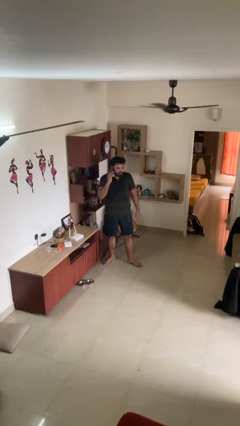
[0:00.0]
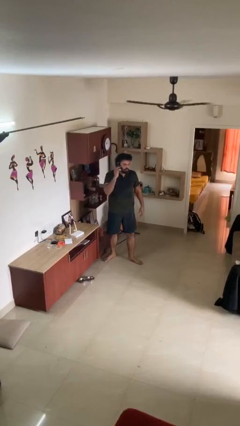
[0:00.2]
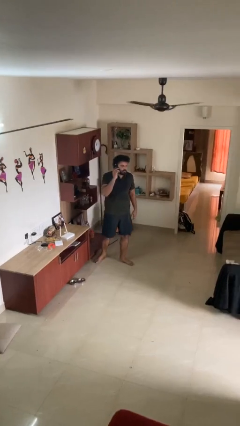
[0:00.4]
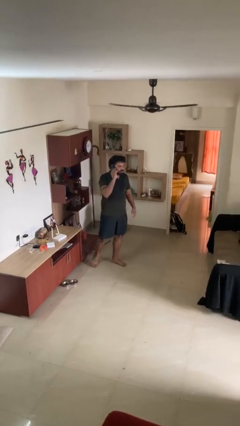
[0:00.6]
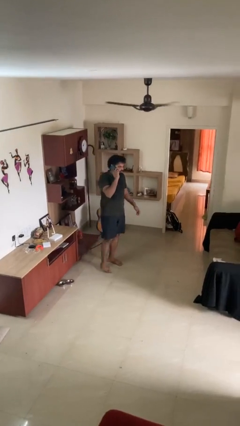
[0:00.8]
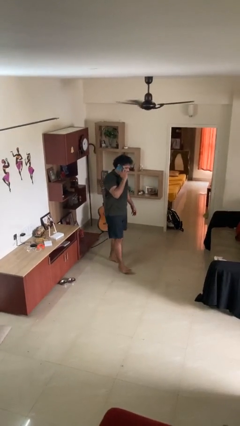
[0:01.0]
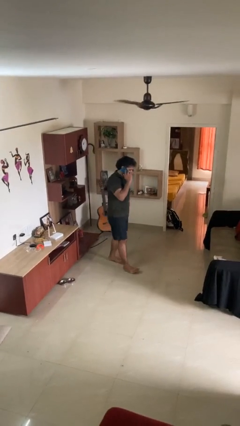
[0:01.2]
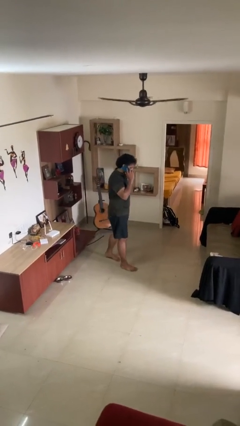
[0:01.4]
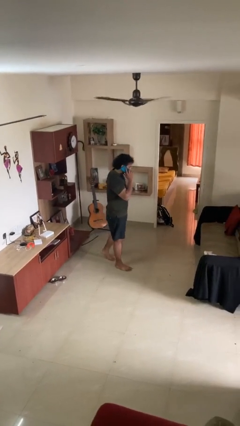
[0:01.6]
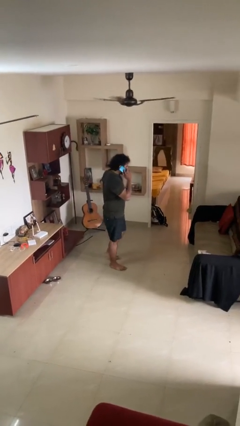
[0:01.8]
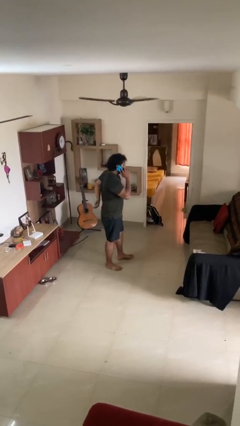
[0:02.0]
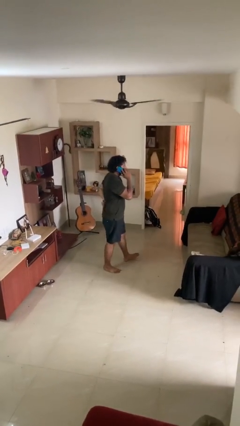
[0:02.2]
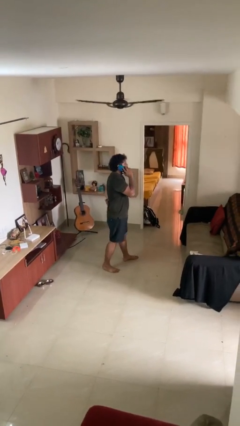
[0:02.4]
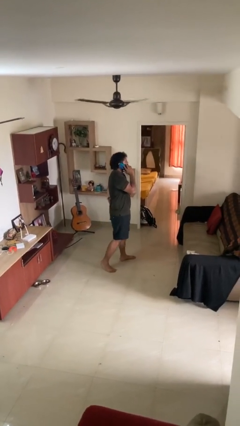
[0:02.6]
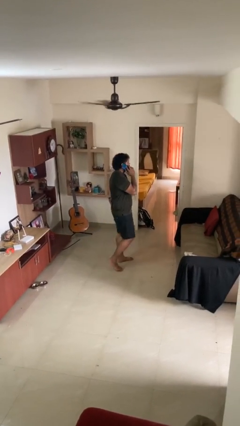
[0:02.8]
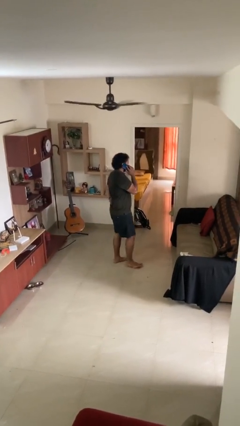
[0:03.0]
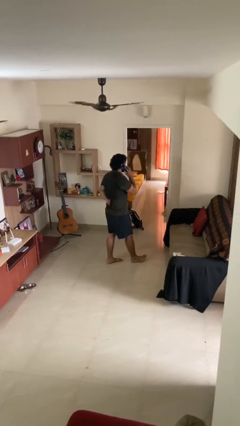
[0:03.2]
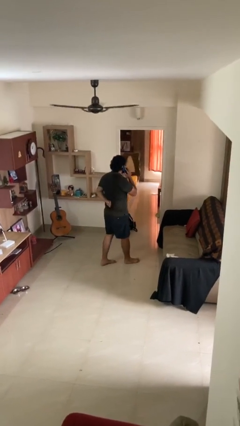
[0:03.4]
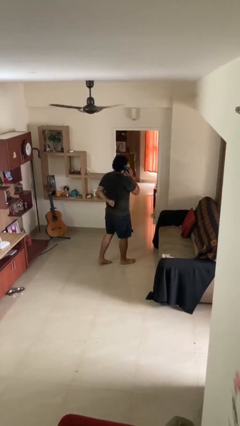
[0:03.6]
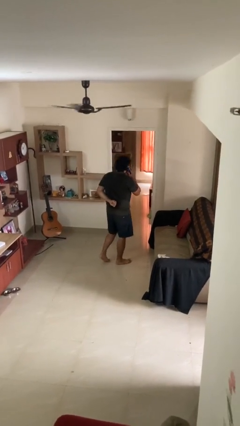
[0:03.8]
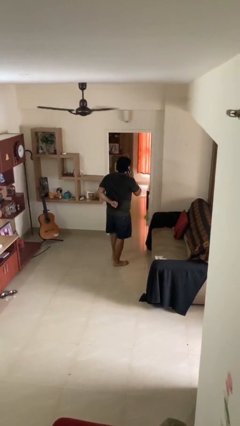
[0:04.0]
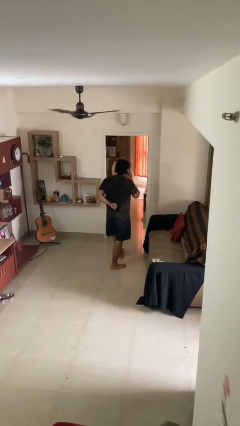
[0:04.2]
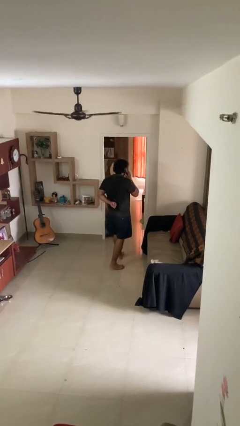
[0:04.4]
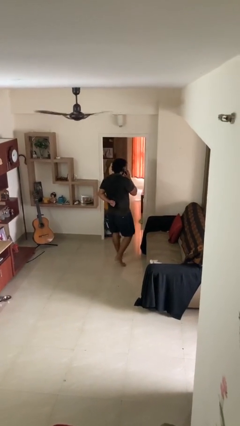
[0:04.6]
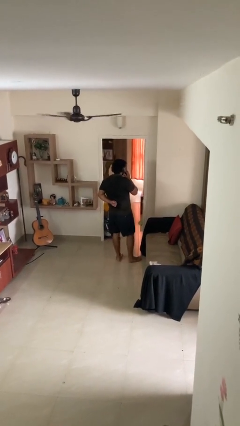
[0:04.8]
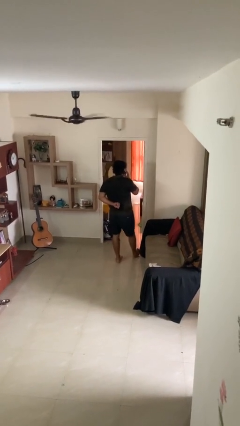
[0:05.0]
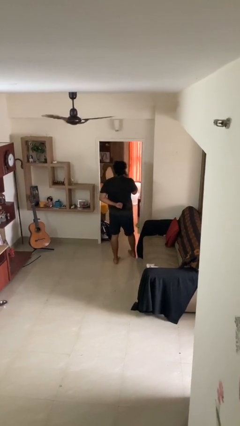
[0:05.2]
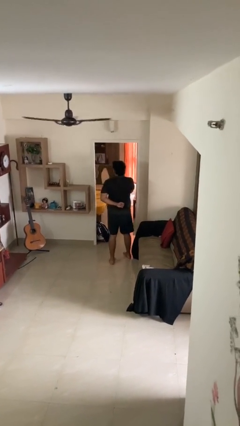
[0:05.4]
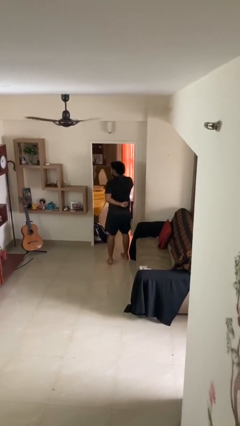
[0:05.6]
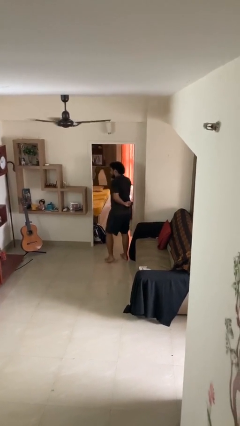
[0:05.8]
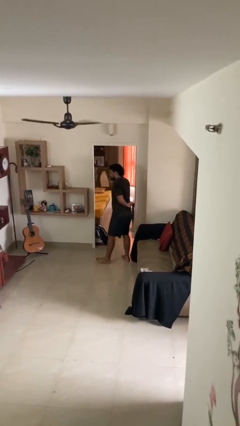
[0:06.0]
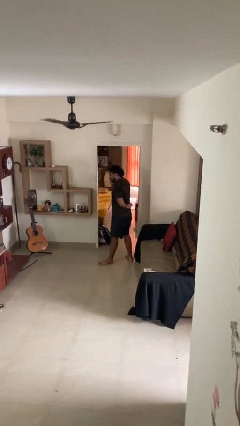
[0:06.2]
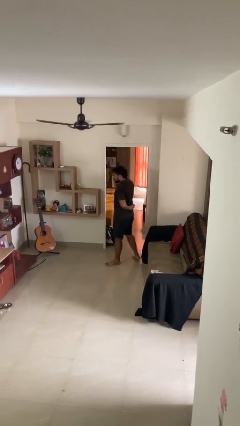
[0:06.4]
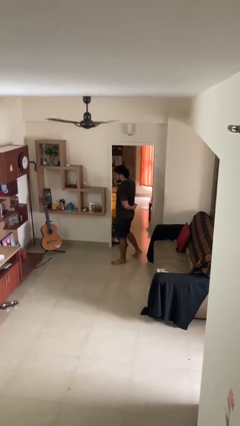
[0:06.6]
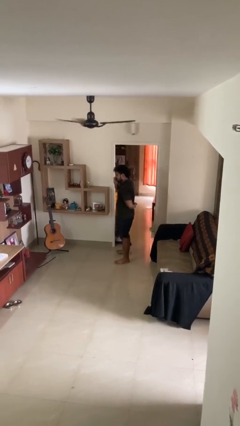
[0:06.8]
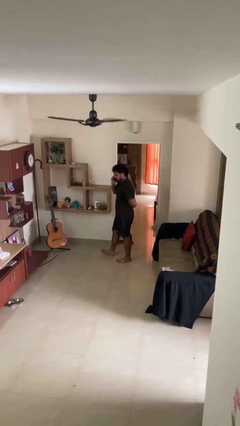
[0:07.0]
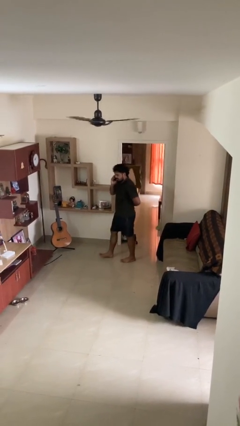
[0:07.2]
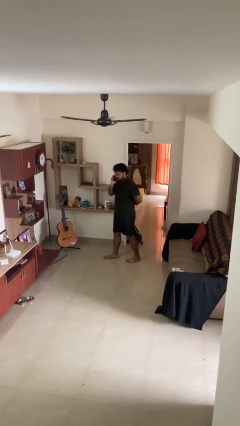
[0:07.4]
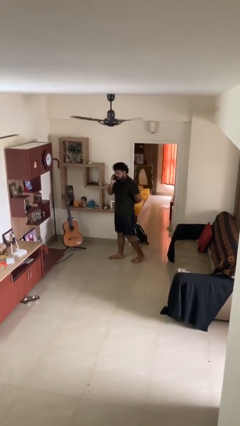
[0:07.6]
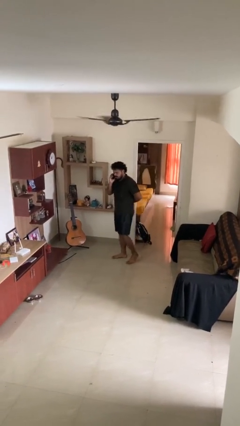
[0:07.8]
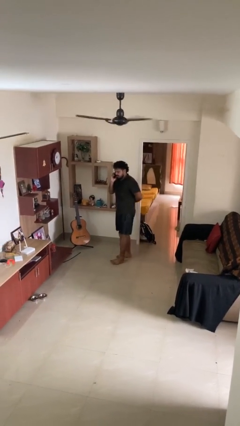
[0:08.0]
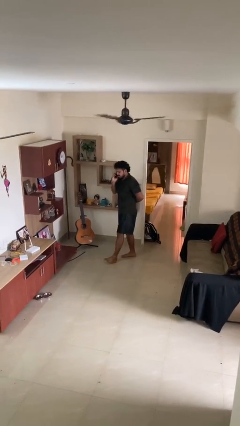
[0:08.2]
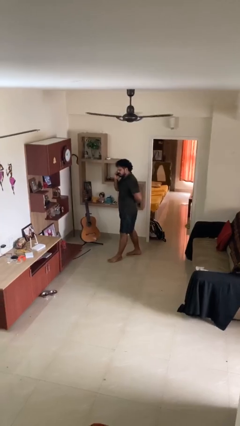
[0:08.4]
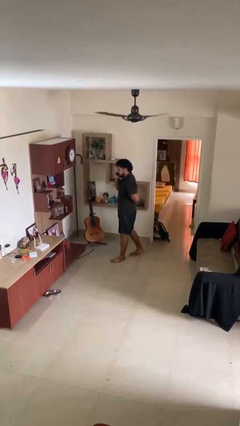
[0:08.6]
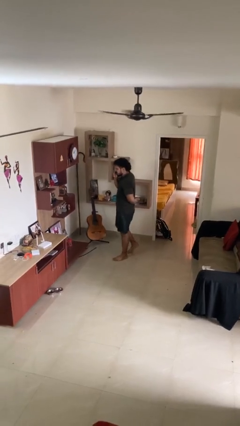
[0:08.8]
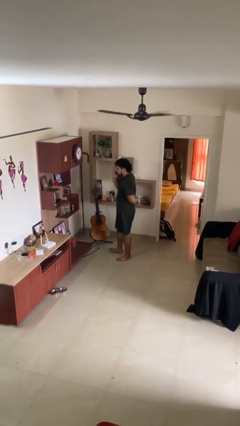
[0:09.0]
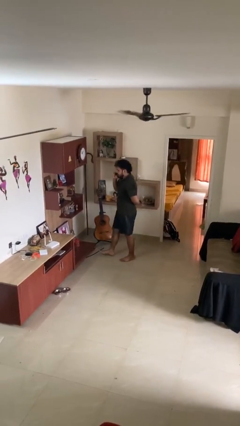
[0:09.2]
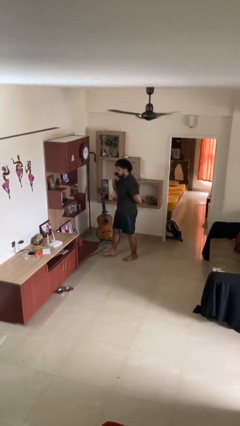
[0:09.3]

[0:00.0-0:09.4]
person talks on phone

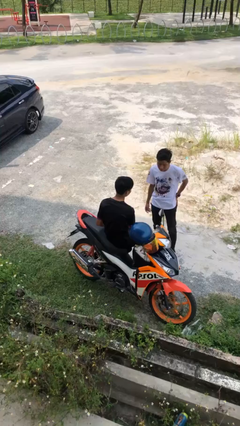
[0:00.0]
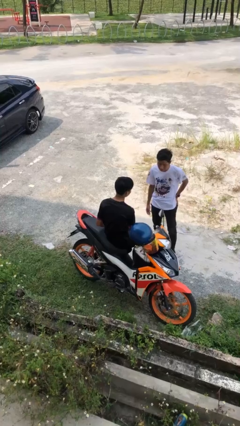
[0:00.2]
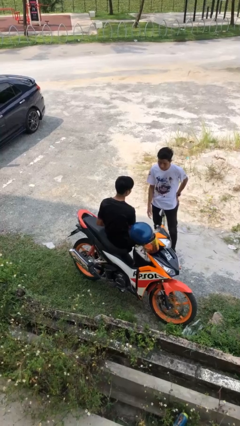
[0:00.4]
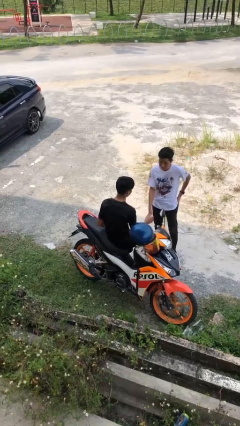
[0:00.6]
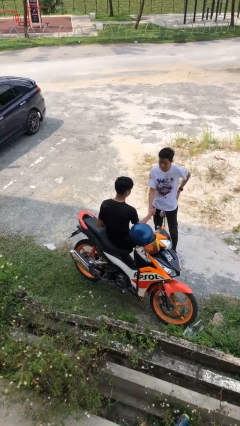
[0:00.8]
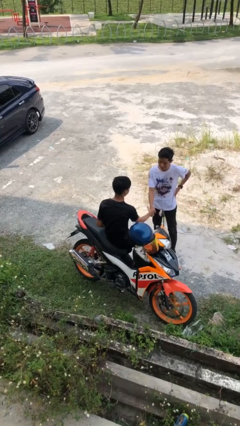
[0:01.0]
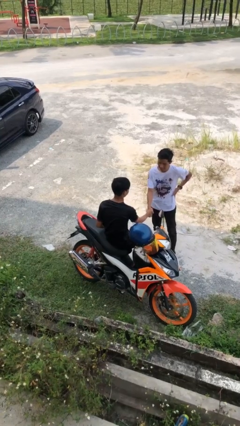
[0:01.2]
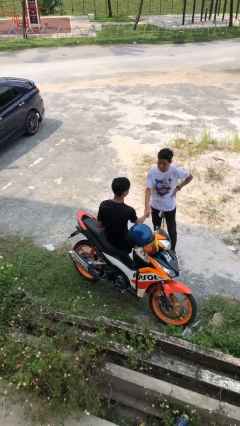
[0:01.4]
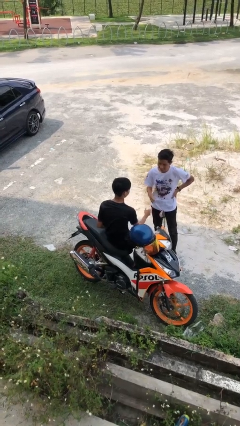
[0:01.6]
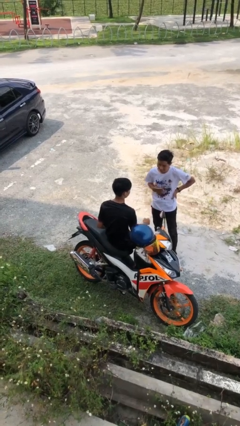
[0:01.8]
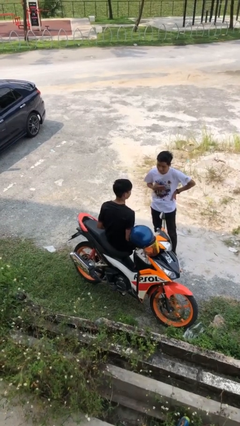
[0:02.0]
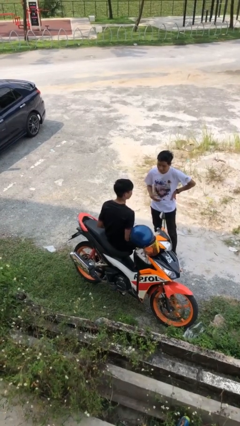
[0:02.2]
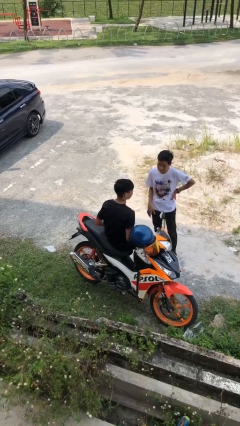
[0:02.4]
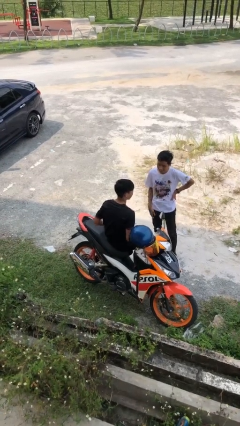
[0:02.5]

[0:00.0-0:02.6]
person shakes hand

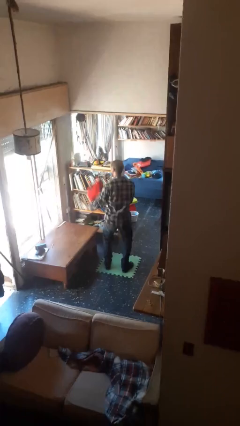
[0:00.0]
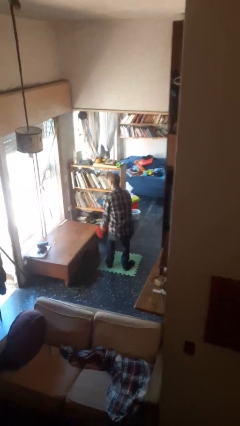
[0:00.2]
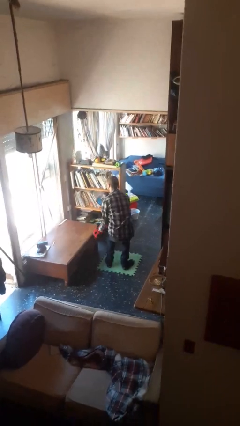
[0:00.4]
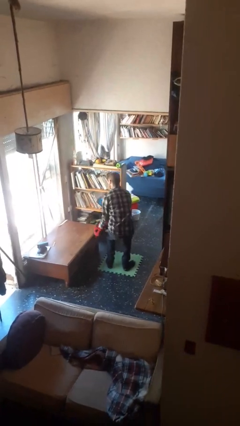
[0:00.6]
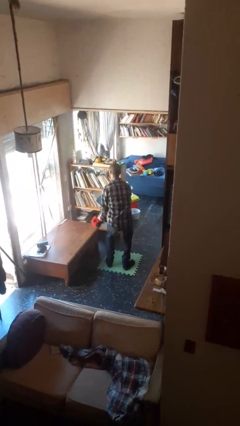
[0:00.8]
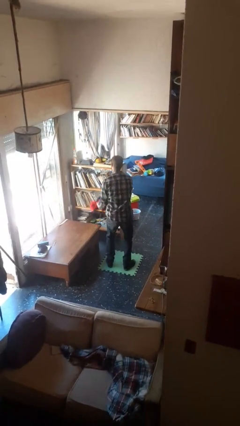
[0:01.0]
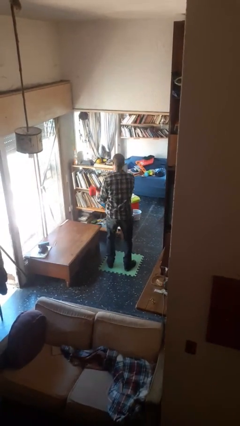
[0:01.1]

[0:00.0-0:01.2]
person catches dropped object

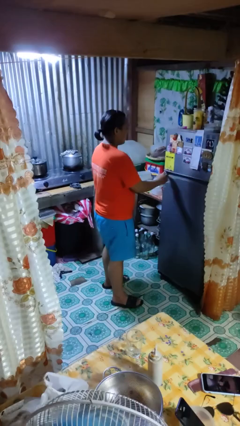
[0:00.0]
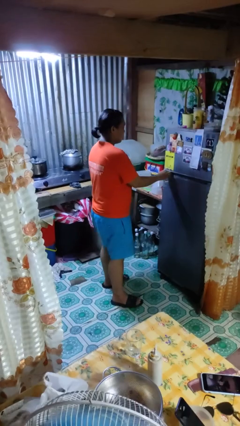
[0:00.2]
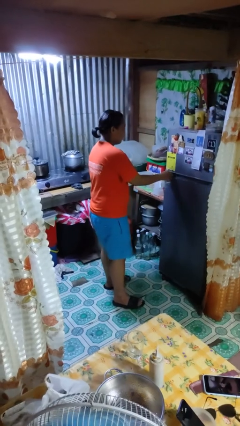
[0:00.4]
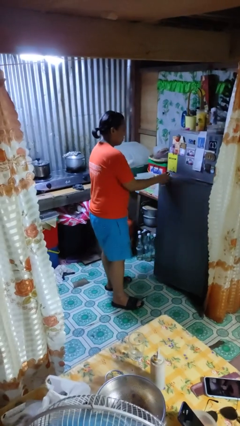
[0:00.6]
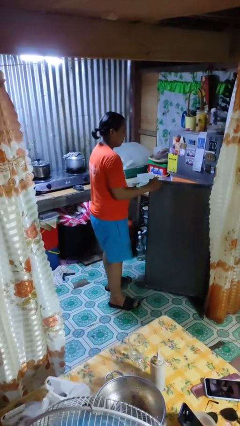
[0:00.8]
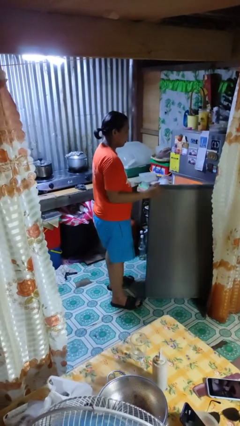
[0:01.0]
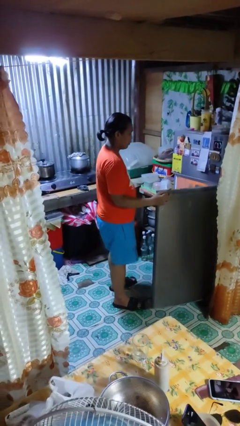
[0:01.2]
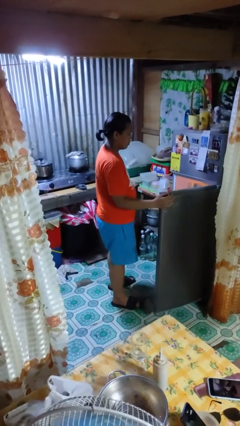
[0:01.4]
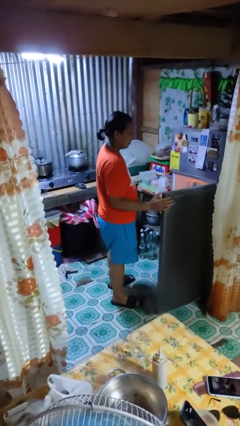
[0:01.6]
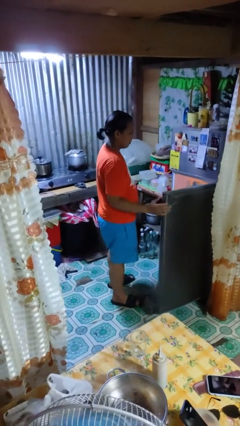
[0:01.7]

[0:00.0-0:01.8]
person opens refrigerator

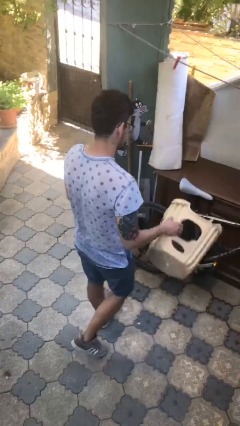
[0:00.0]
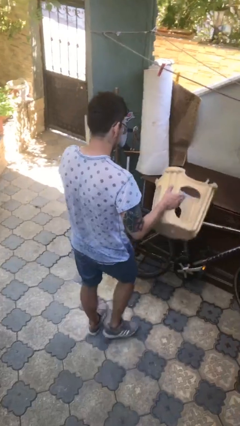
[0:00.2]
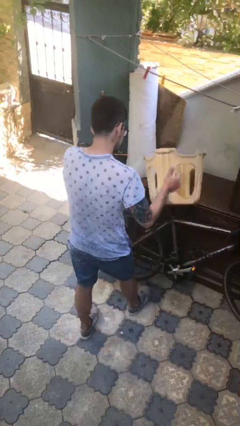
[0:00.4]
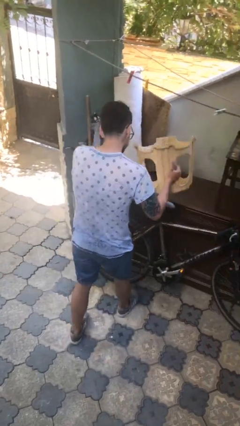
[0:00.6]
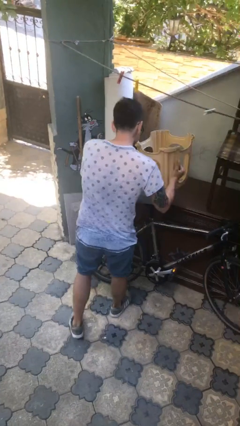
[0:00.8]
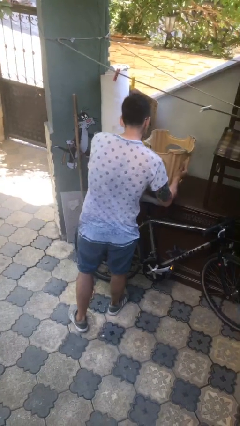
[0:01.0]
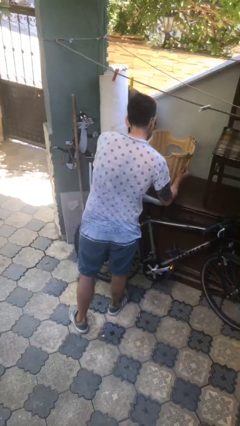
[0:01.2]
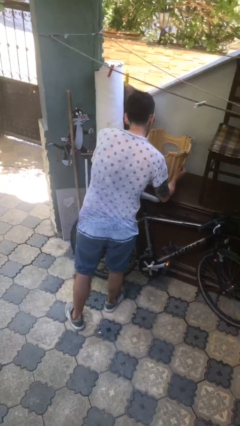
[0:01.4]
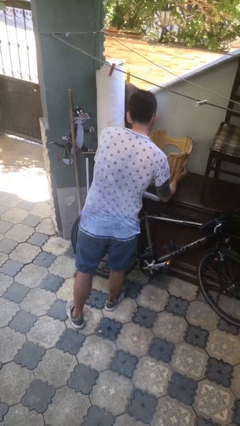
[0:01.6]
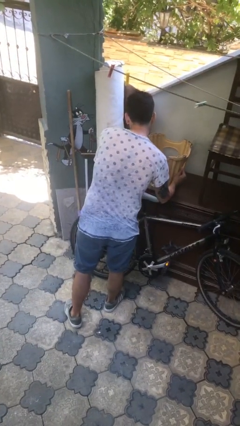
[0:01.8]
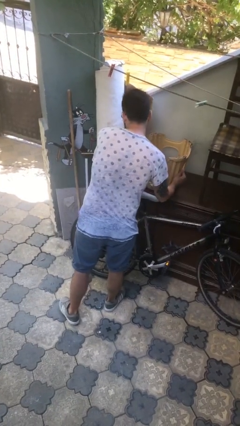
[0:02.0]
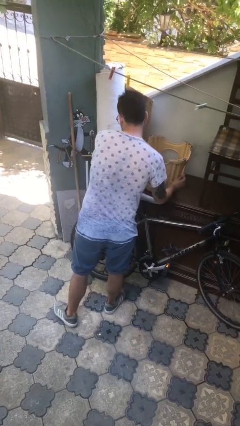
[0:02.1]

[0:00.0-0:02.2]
person puts down object on table

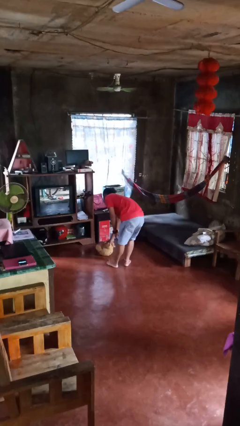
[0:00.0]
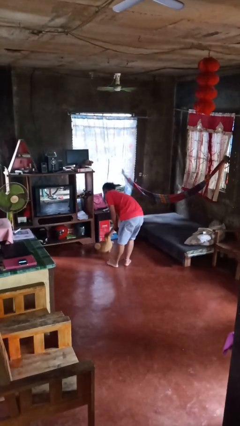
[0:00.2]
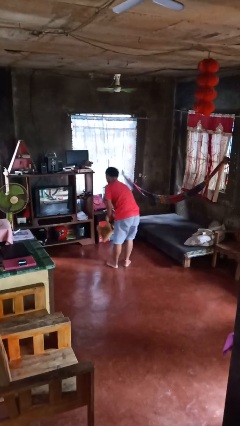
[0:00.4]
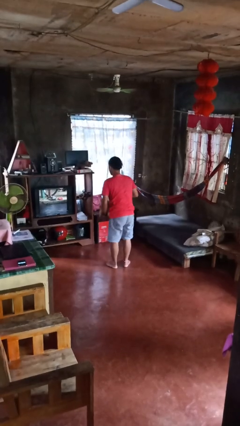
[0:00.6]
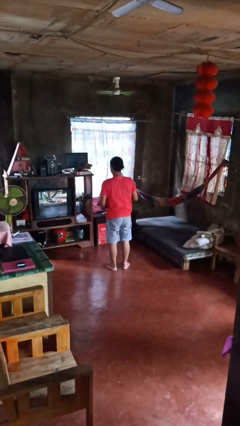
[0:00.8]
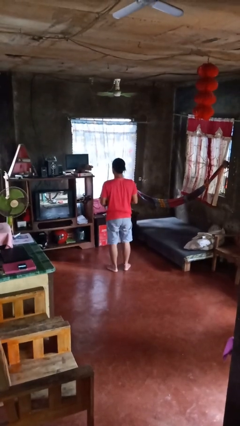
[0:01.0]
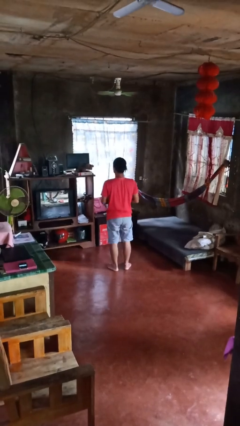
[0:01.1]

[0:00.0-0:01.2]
person picks up object from floor
